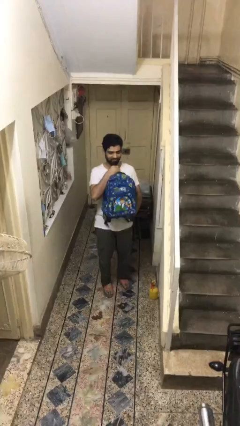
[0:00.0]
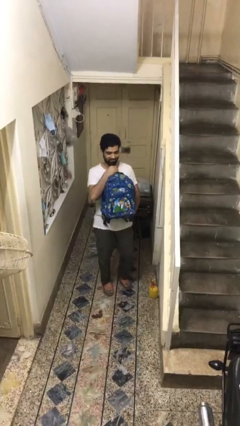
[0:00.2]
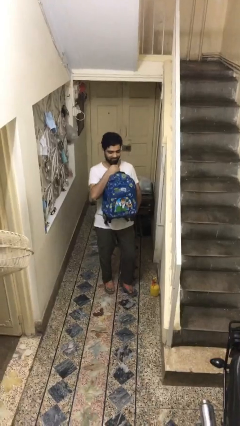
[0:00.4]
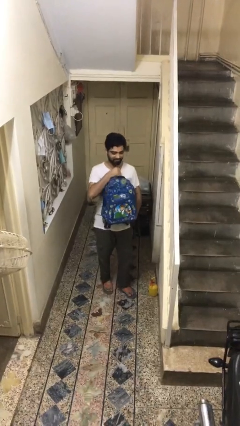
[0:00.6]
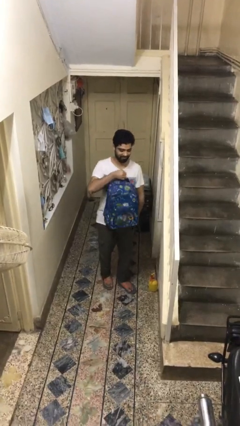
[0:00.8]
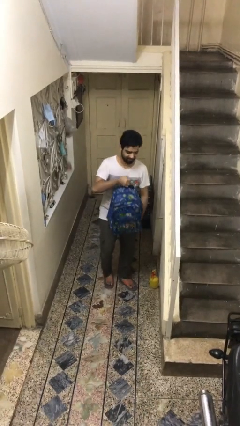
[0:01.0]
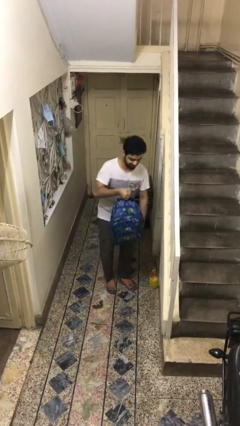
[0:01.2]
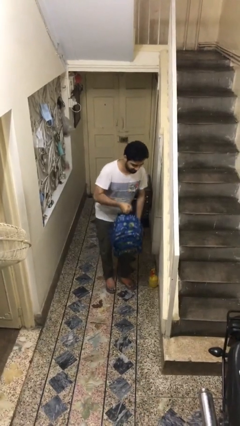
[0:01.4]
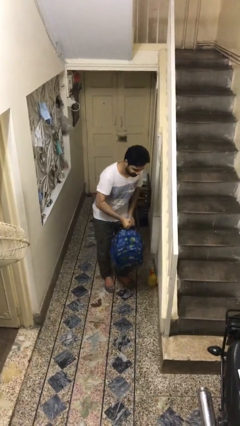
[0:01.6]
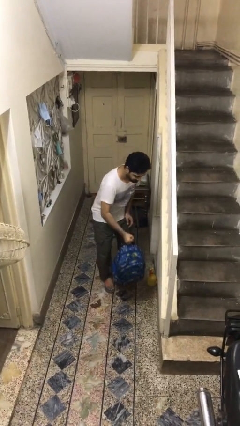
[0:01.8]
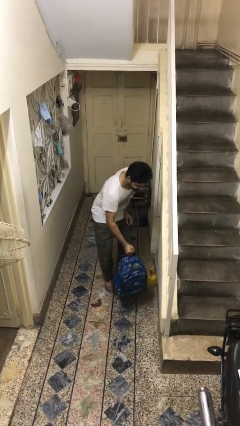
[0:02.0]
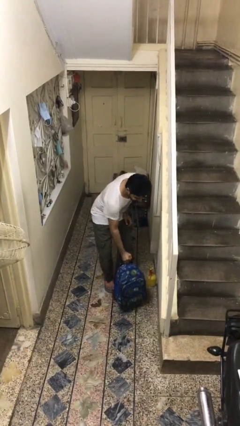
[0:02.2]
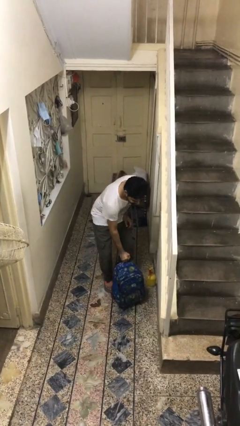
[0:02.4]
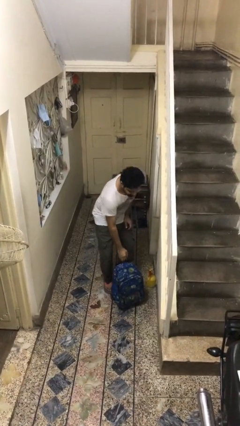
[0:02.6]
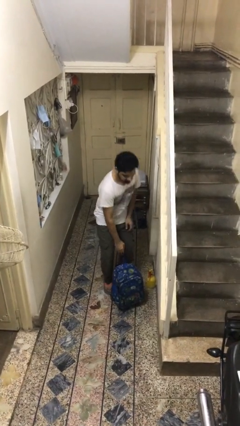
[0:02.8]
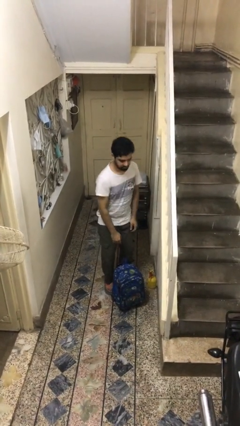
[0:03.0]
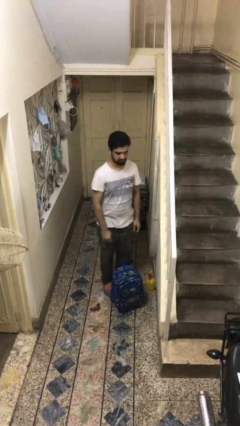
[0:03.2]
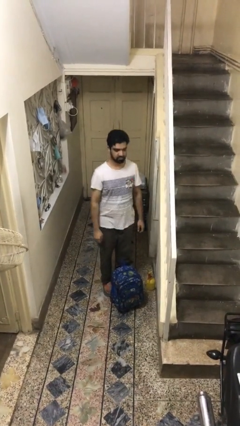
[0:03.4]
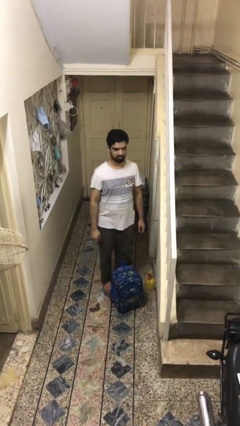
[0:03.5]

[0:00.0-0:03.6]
person puts down object on floor

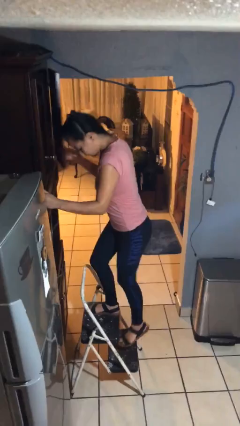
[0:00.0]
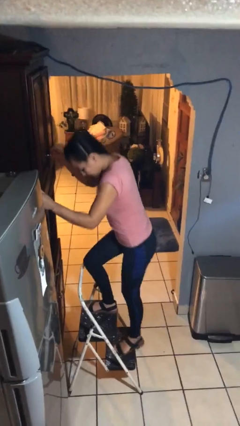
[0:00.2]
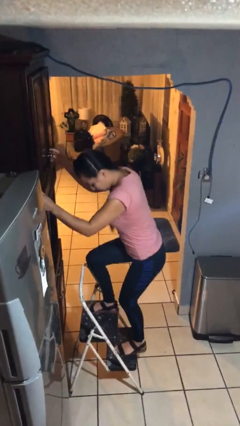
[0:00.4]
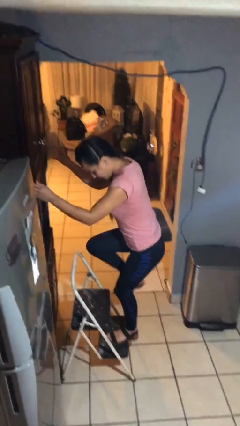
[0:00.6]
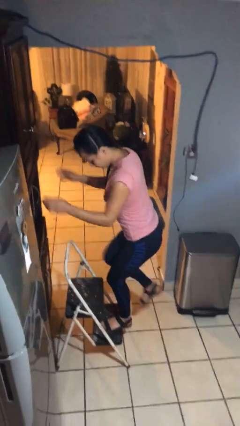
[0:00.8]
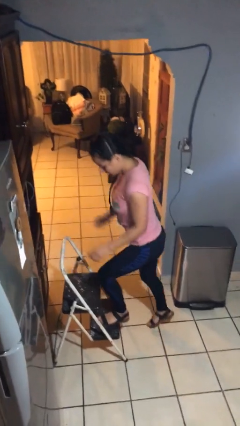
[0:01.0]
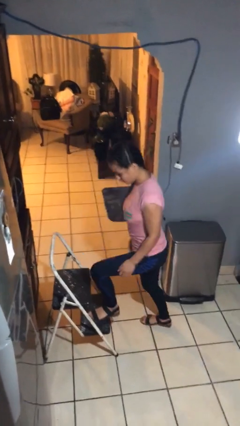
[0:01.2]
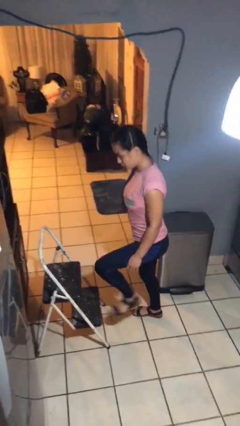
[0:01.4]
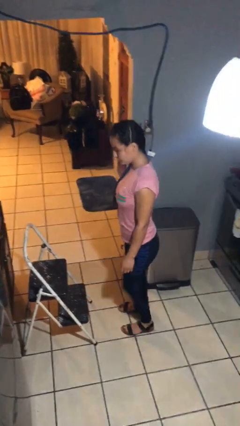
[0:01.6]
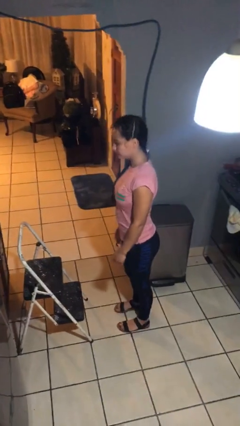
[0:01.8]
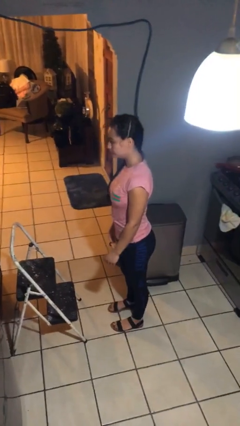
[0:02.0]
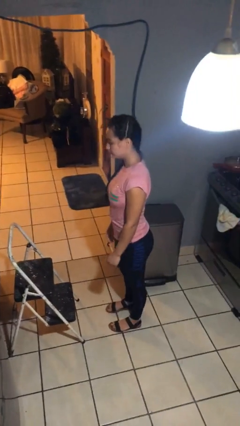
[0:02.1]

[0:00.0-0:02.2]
person climbs down ladder

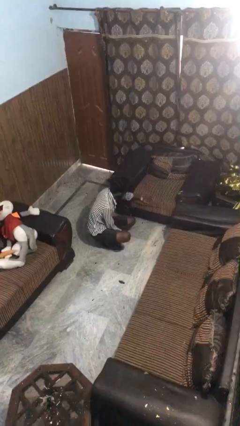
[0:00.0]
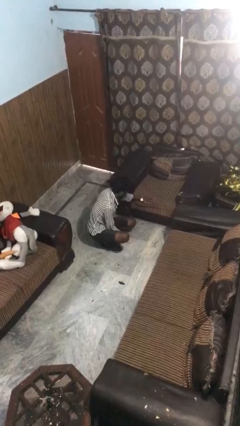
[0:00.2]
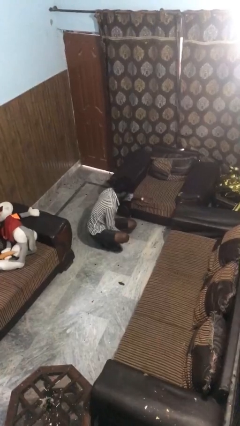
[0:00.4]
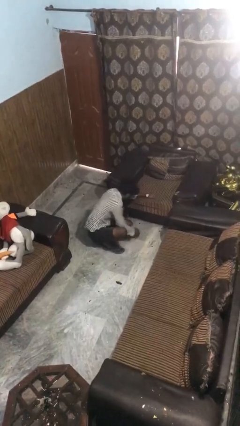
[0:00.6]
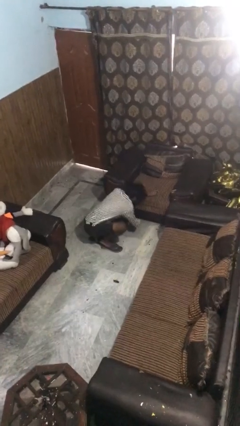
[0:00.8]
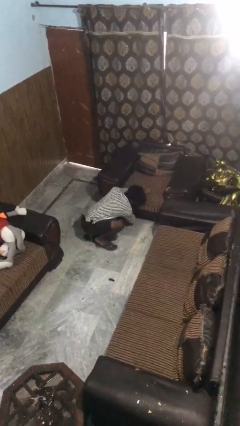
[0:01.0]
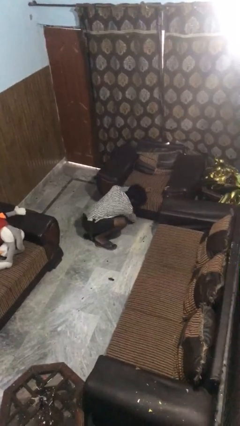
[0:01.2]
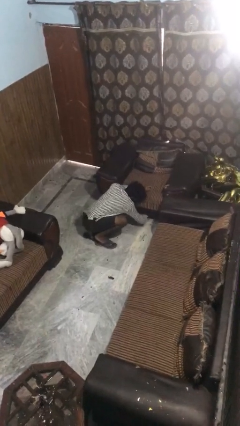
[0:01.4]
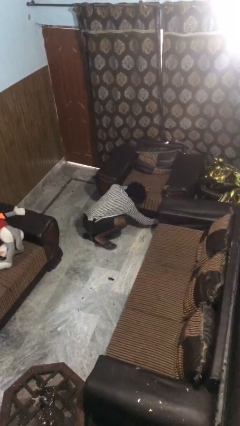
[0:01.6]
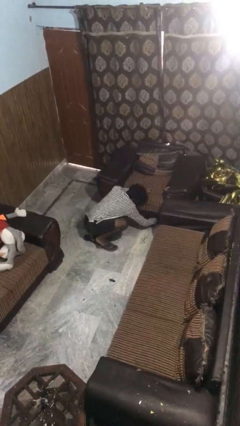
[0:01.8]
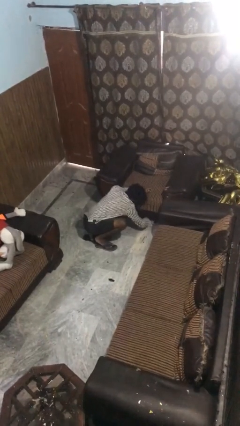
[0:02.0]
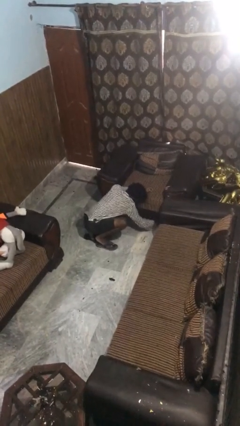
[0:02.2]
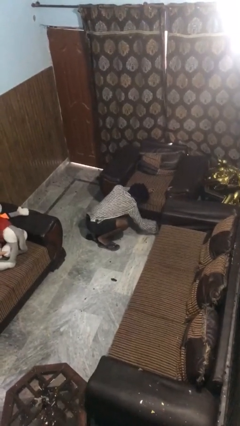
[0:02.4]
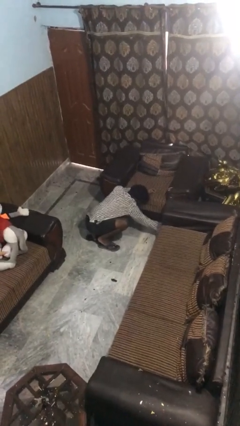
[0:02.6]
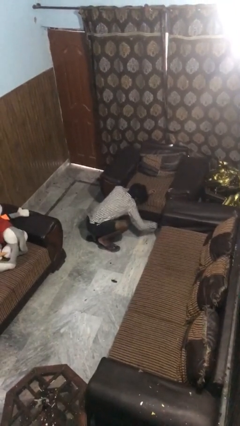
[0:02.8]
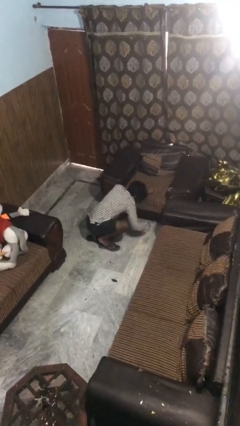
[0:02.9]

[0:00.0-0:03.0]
person searches under couch

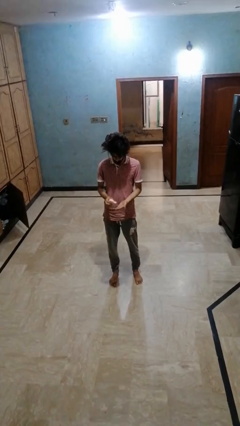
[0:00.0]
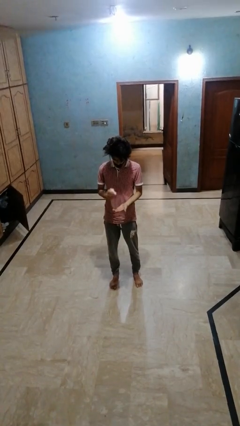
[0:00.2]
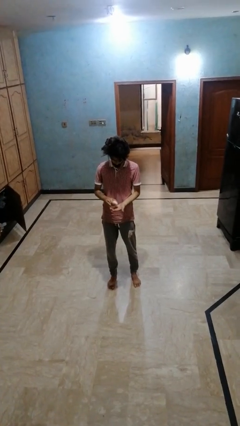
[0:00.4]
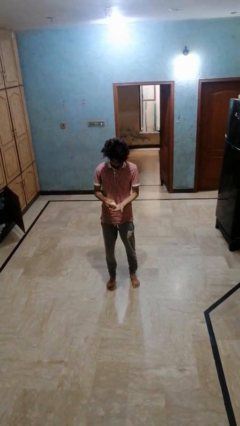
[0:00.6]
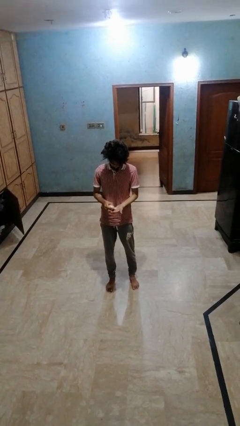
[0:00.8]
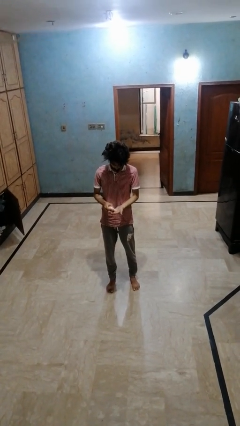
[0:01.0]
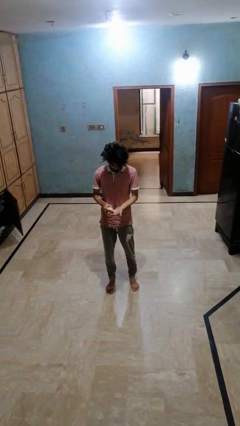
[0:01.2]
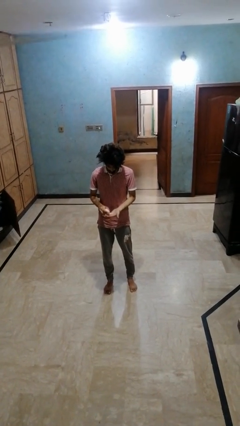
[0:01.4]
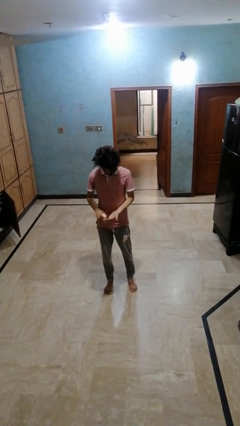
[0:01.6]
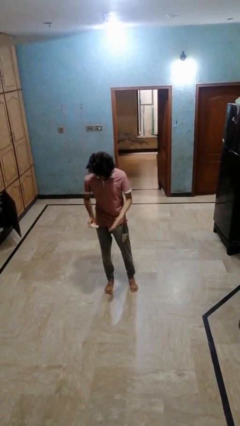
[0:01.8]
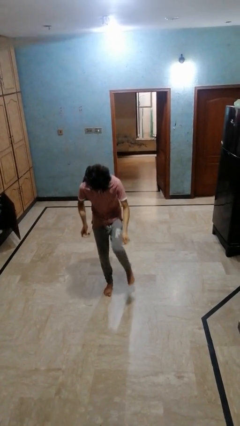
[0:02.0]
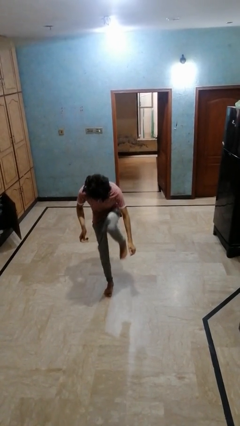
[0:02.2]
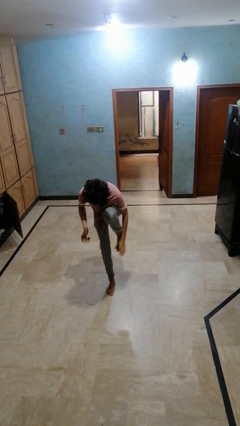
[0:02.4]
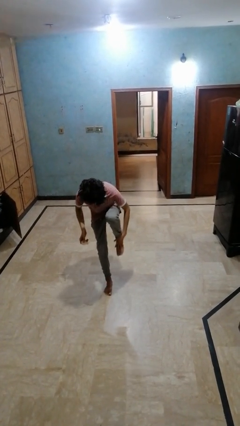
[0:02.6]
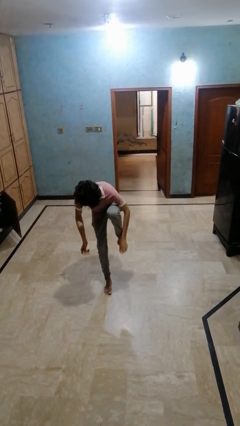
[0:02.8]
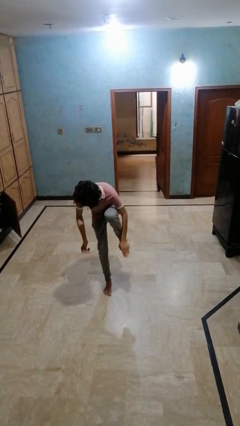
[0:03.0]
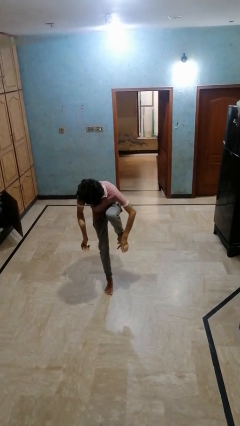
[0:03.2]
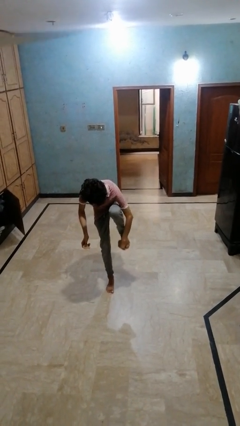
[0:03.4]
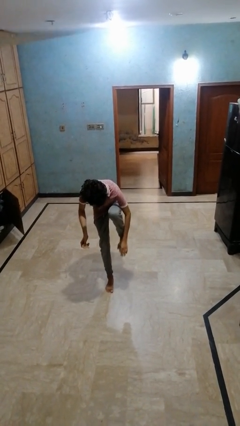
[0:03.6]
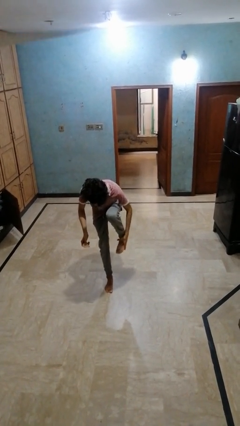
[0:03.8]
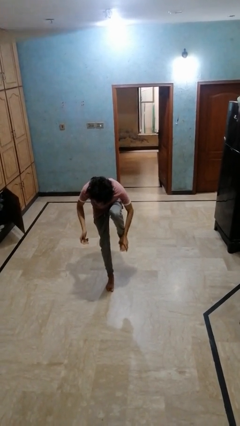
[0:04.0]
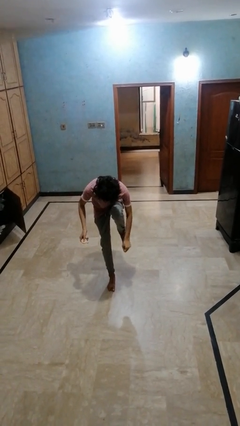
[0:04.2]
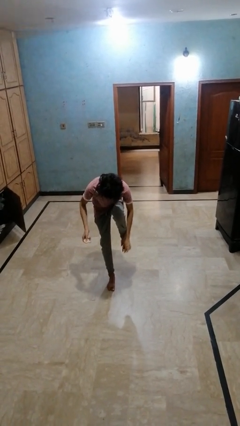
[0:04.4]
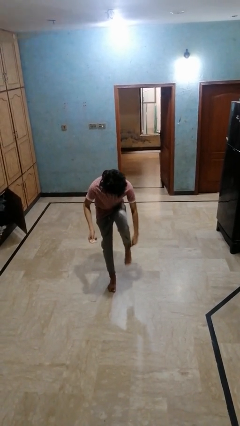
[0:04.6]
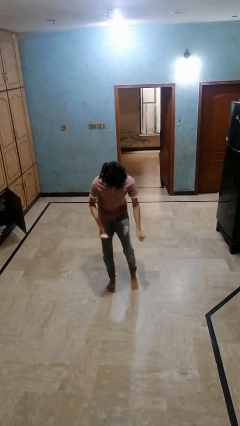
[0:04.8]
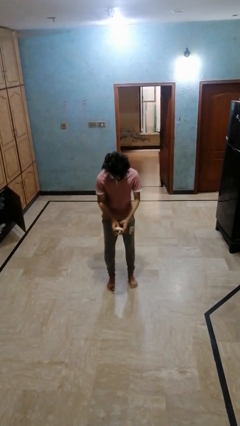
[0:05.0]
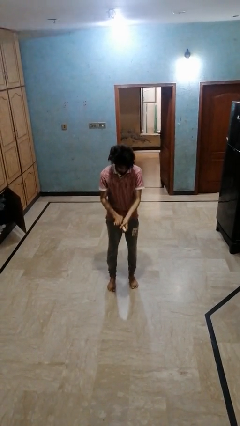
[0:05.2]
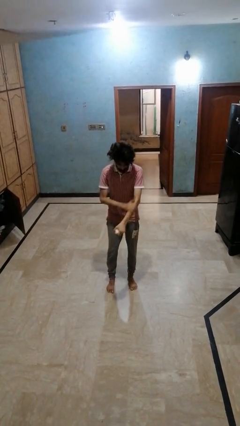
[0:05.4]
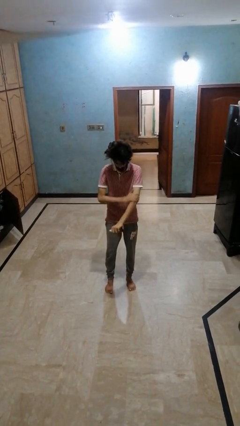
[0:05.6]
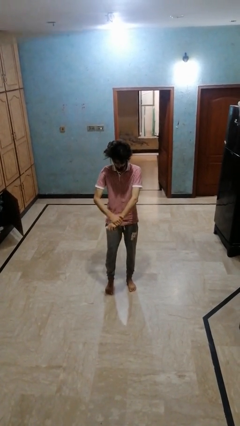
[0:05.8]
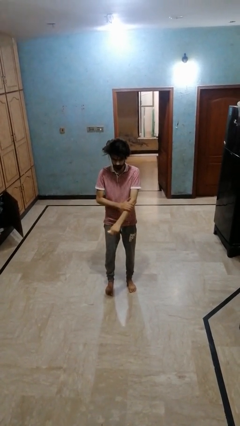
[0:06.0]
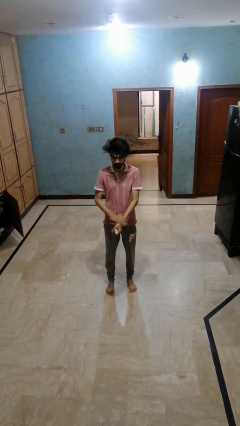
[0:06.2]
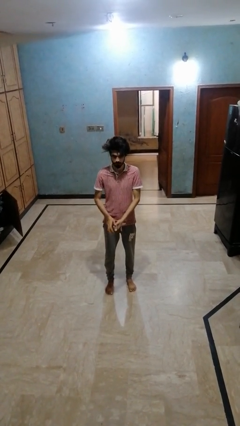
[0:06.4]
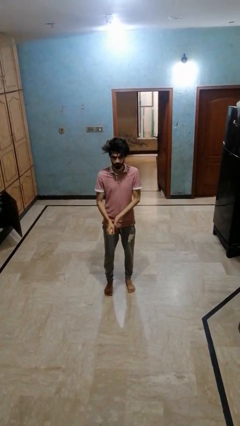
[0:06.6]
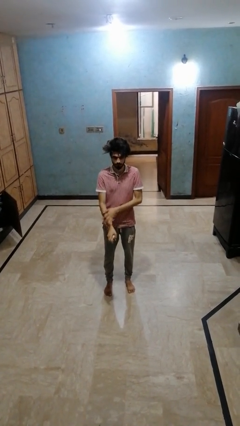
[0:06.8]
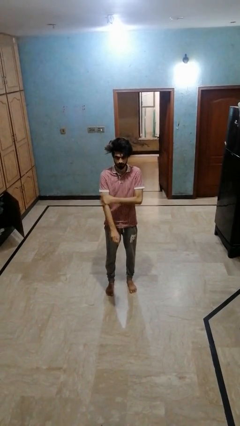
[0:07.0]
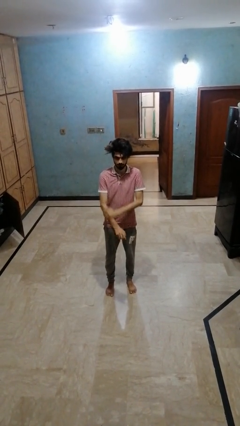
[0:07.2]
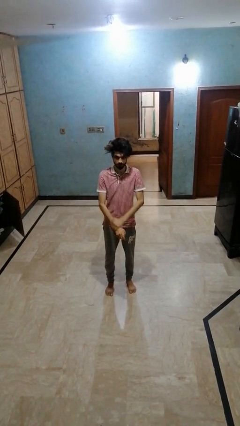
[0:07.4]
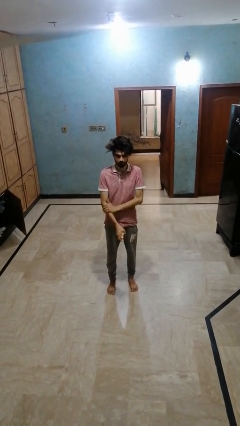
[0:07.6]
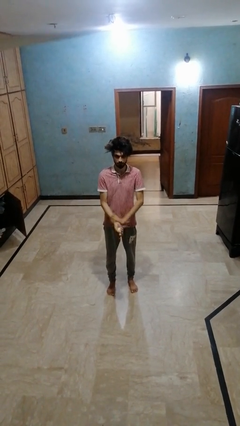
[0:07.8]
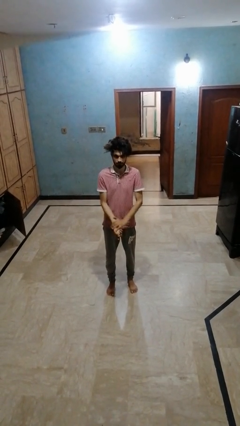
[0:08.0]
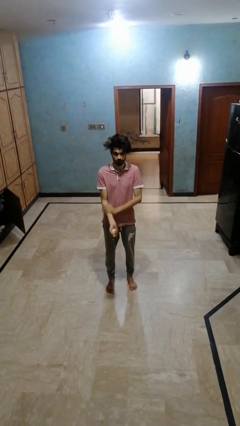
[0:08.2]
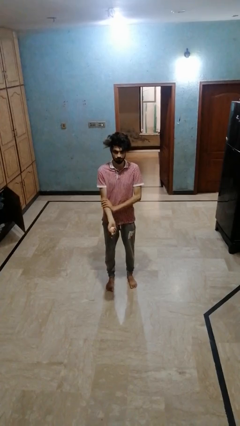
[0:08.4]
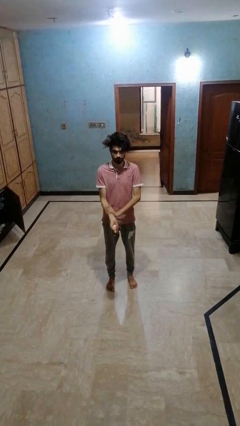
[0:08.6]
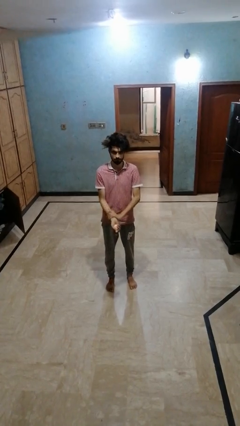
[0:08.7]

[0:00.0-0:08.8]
person applies sunscreen
